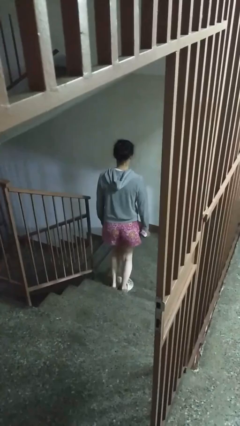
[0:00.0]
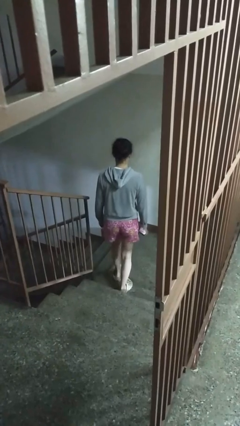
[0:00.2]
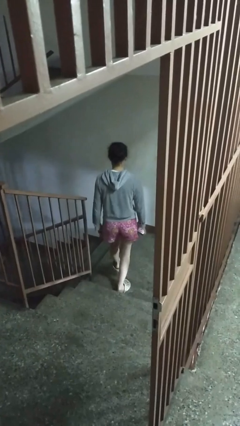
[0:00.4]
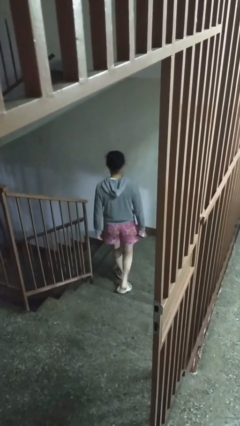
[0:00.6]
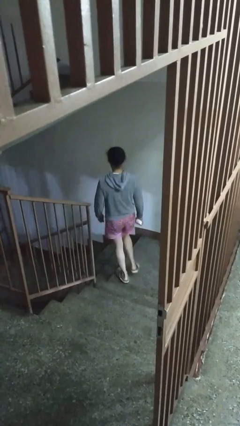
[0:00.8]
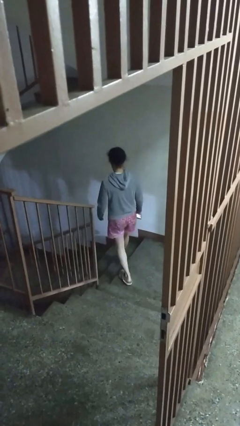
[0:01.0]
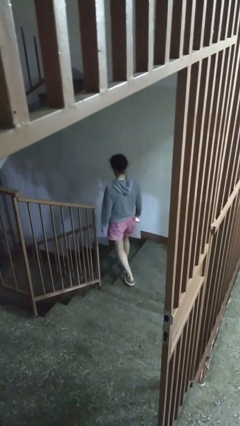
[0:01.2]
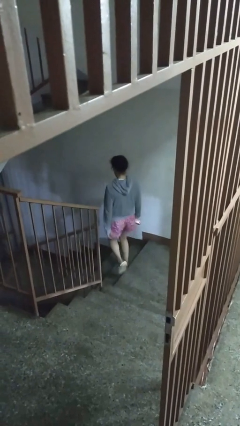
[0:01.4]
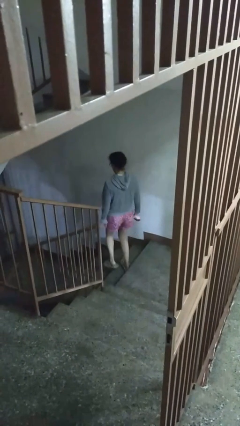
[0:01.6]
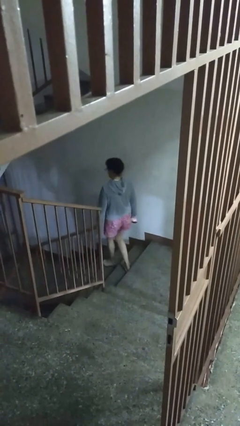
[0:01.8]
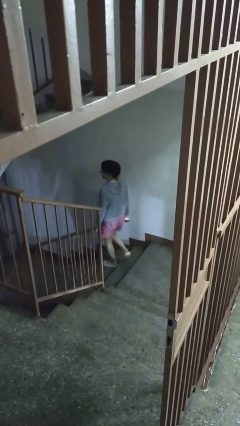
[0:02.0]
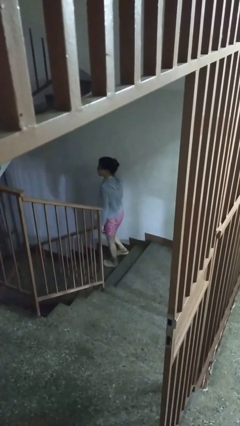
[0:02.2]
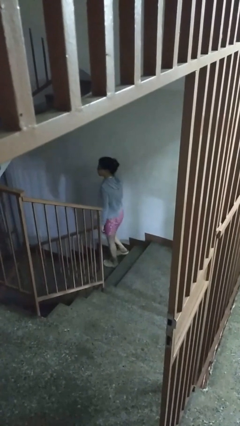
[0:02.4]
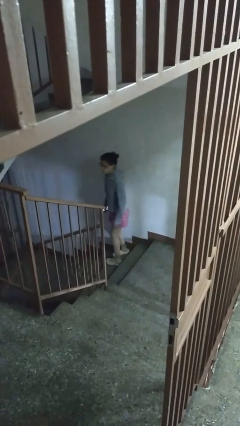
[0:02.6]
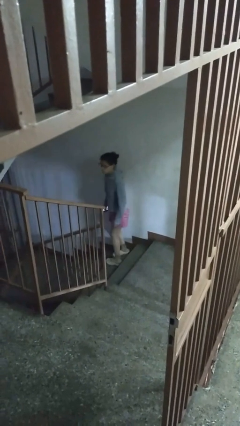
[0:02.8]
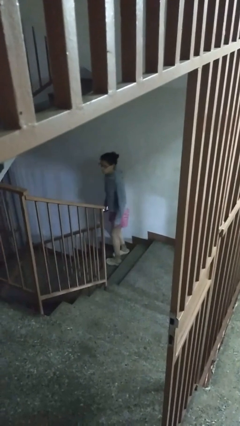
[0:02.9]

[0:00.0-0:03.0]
person climbs down stairs

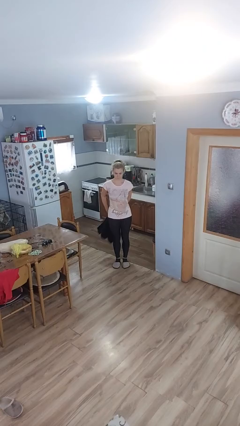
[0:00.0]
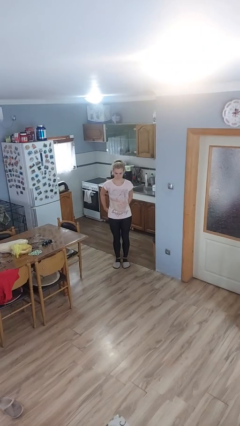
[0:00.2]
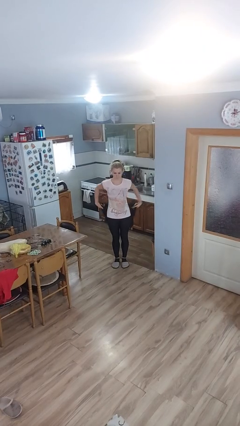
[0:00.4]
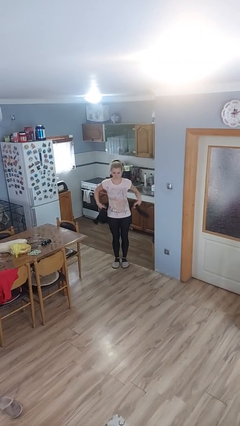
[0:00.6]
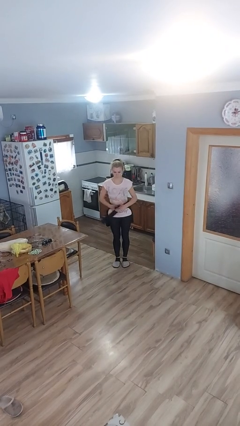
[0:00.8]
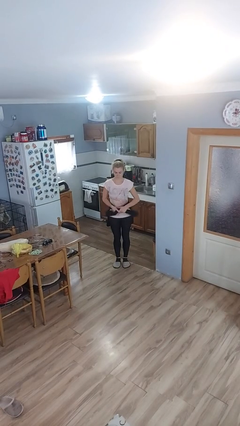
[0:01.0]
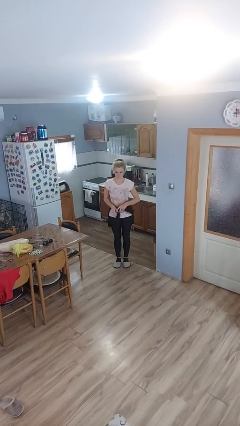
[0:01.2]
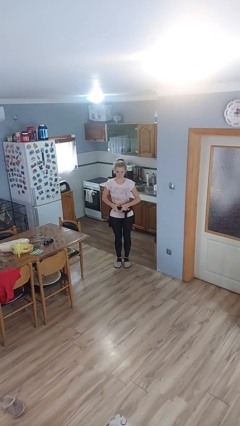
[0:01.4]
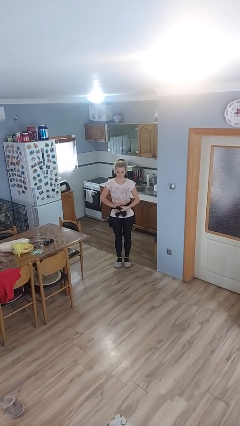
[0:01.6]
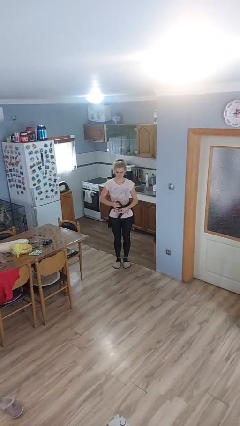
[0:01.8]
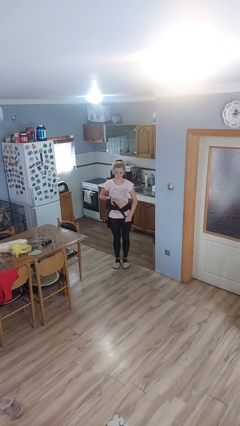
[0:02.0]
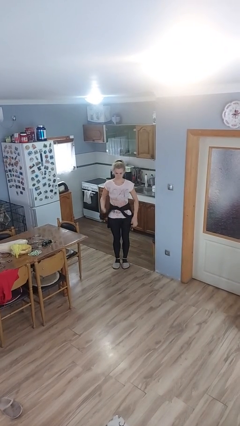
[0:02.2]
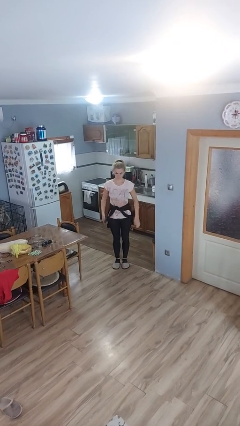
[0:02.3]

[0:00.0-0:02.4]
person ties jacket around waist

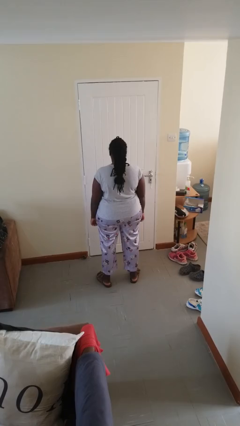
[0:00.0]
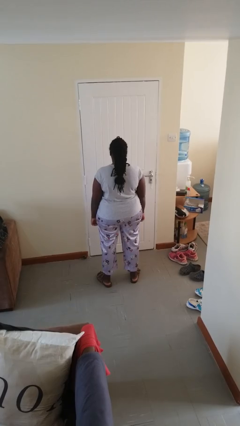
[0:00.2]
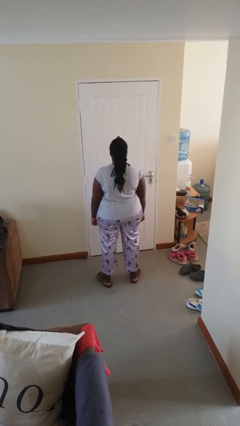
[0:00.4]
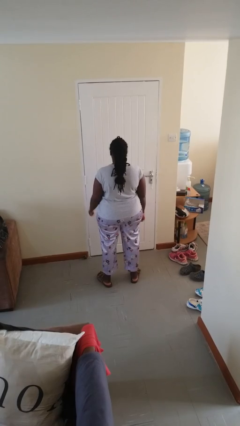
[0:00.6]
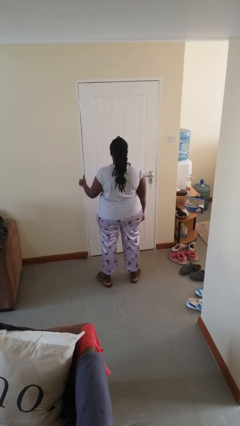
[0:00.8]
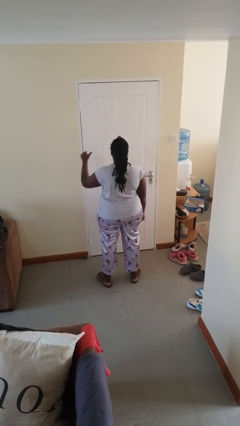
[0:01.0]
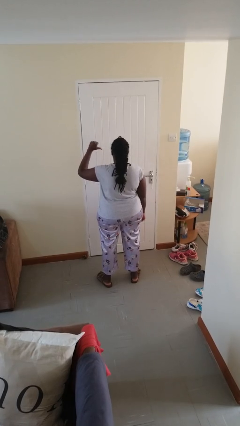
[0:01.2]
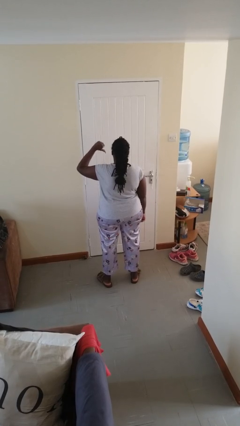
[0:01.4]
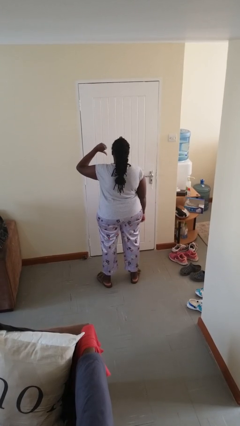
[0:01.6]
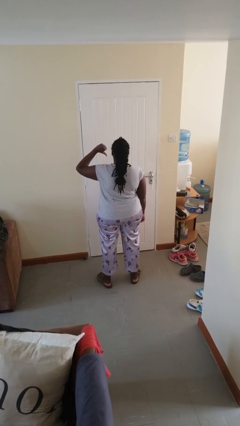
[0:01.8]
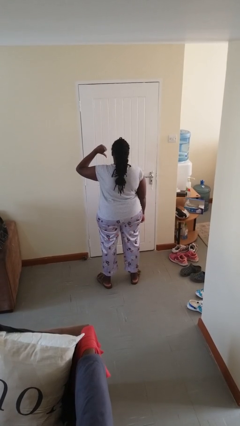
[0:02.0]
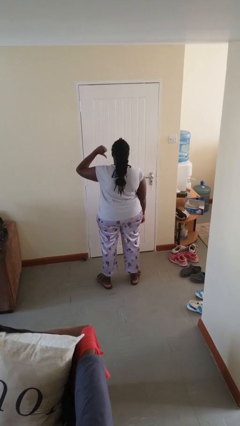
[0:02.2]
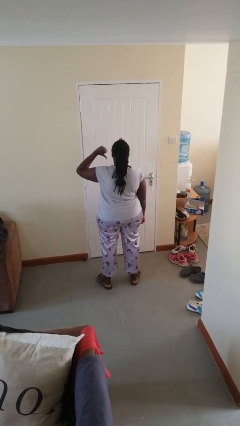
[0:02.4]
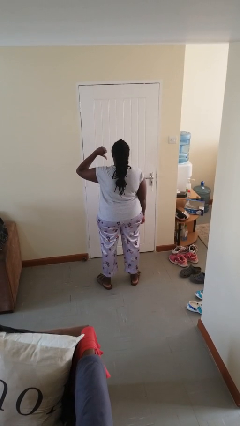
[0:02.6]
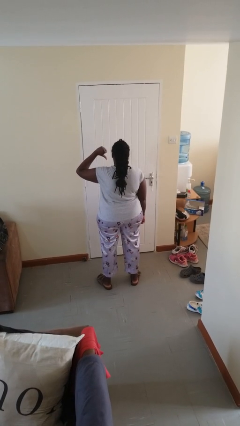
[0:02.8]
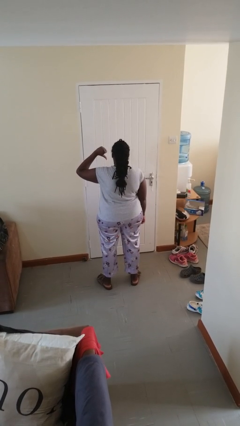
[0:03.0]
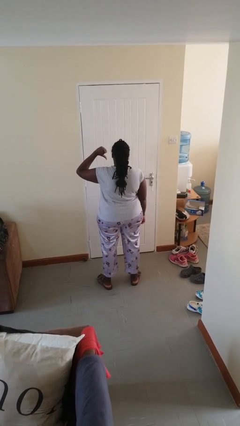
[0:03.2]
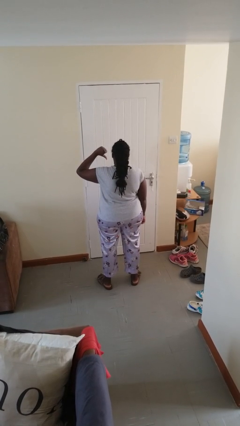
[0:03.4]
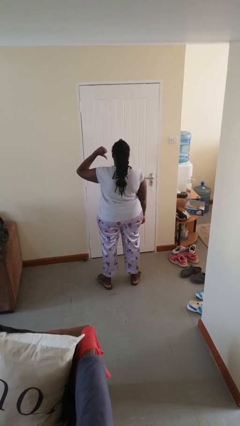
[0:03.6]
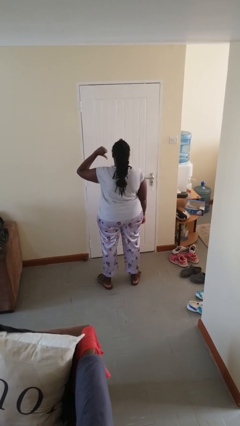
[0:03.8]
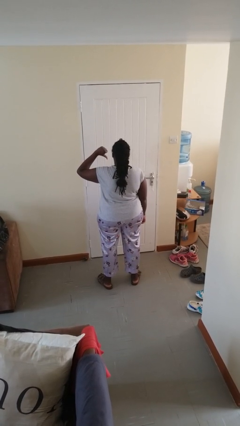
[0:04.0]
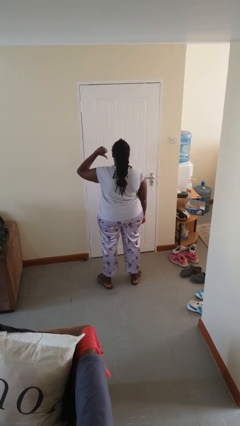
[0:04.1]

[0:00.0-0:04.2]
person gestures thumbs down

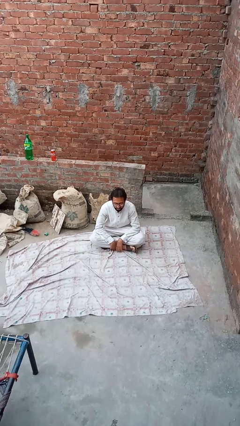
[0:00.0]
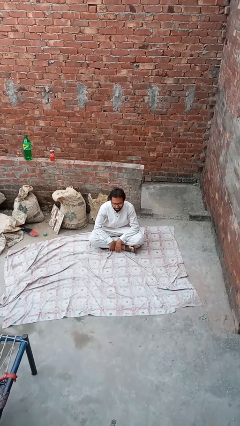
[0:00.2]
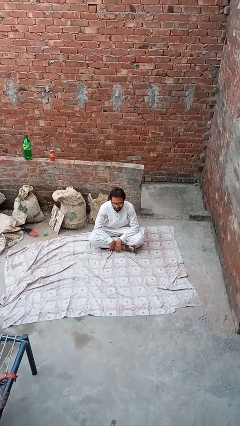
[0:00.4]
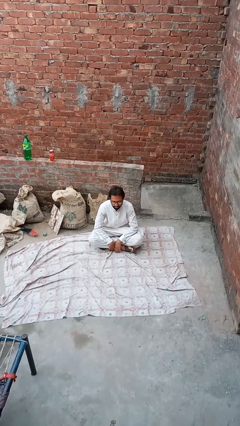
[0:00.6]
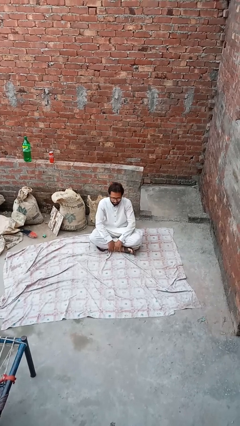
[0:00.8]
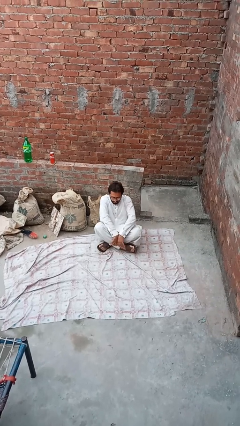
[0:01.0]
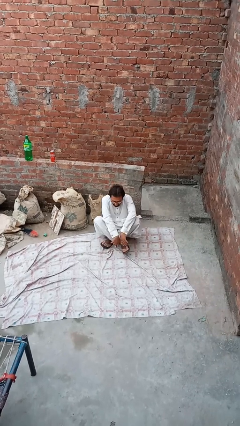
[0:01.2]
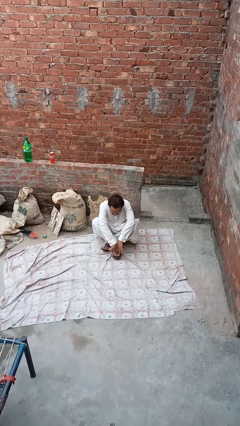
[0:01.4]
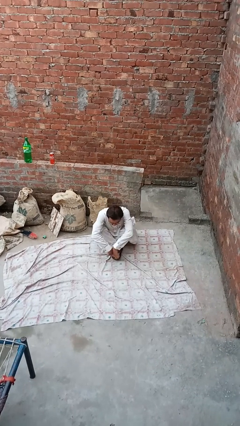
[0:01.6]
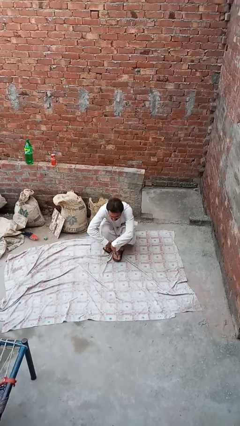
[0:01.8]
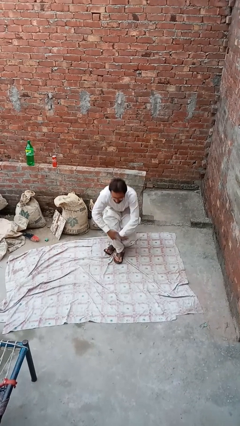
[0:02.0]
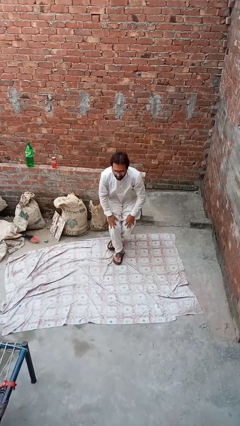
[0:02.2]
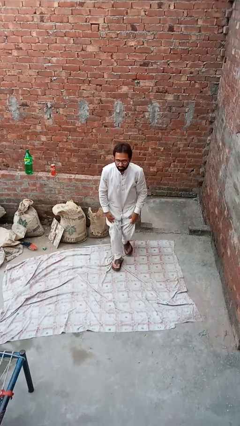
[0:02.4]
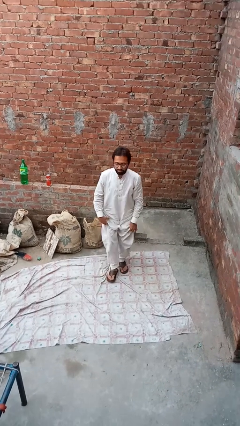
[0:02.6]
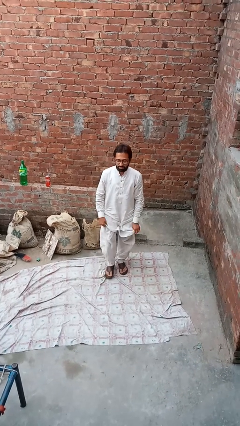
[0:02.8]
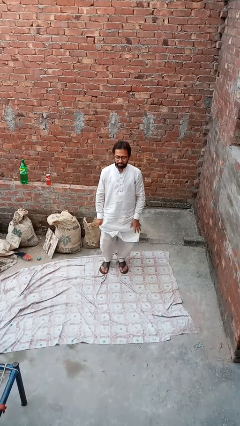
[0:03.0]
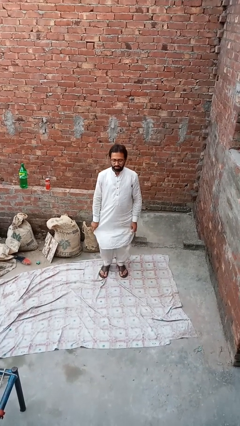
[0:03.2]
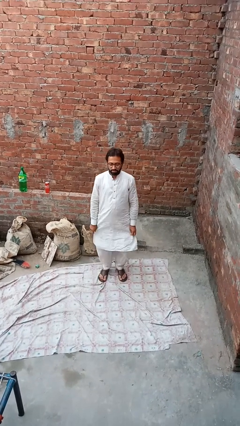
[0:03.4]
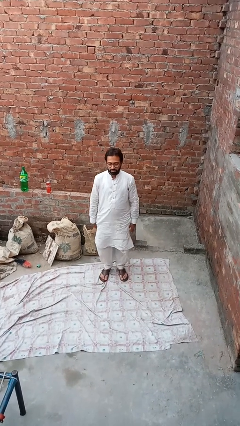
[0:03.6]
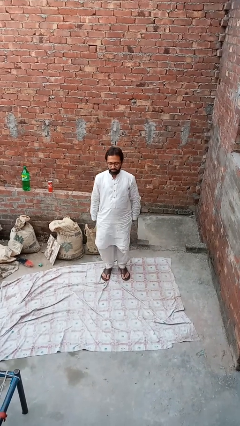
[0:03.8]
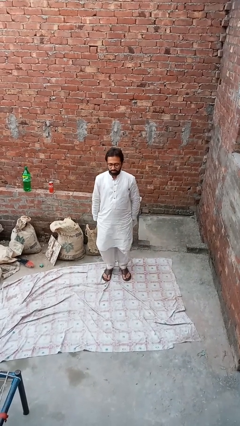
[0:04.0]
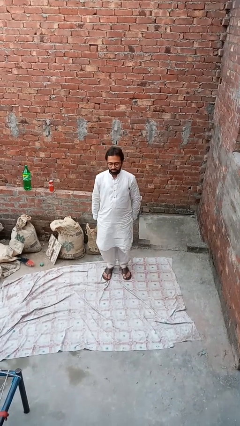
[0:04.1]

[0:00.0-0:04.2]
person stands up from floor

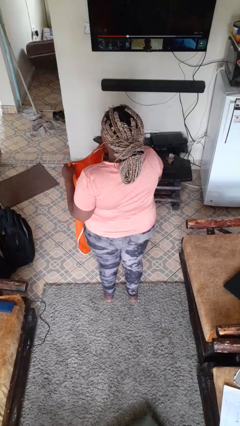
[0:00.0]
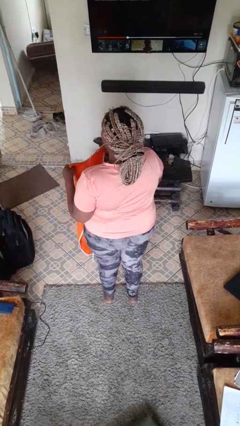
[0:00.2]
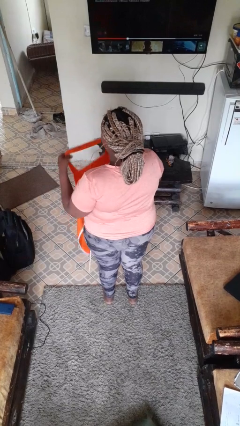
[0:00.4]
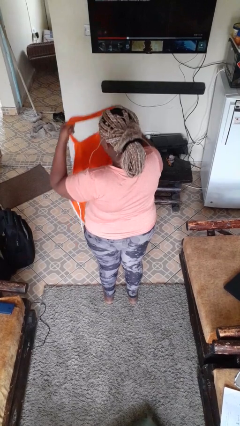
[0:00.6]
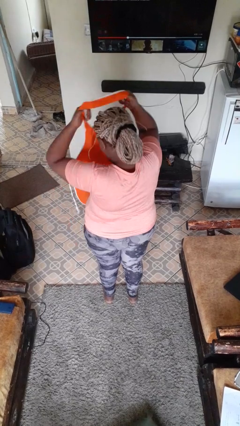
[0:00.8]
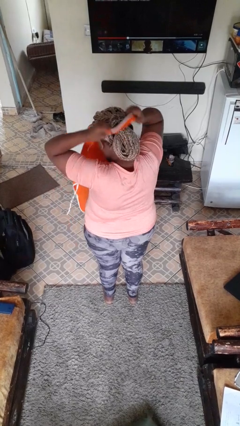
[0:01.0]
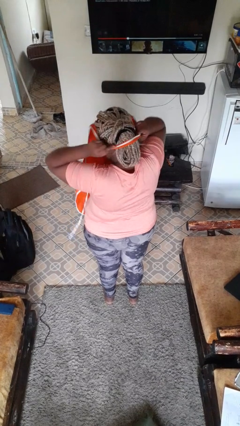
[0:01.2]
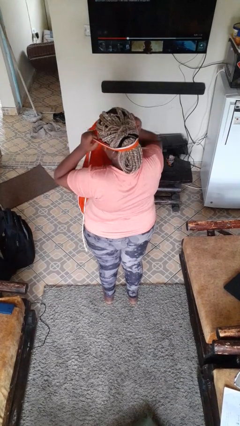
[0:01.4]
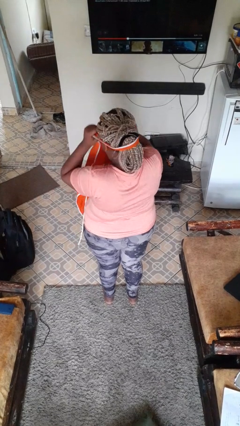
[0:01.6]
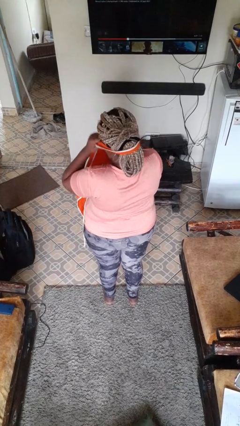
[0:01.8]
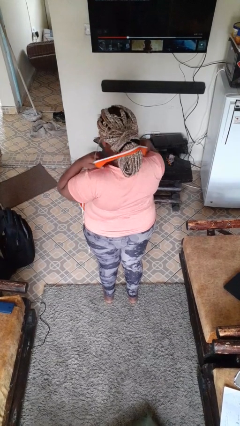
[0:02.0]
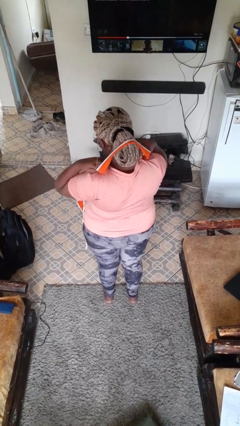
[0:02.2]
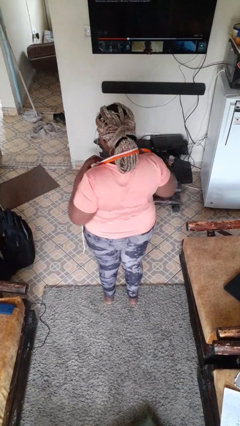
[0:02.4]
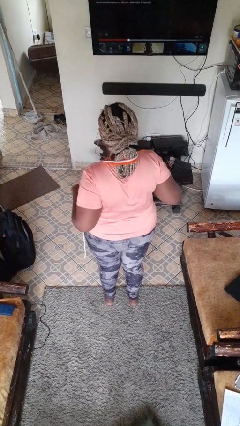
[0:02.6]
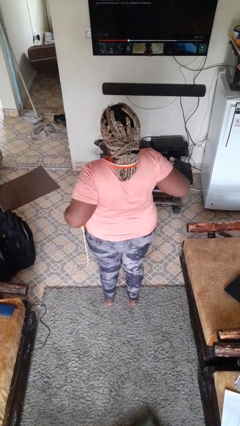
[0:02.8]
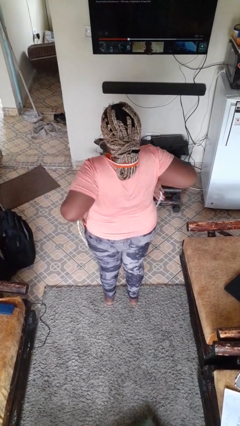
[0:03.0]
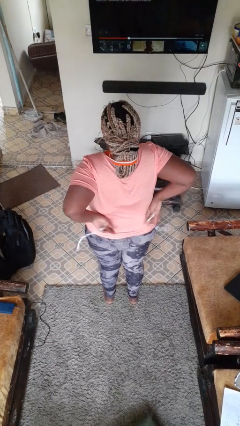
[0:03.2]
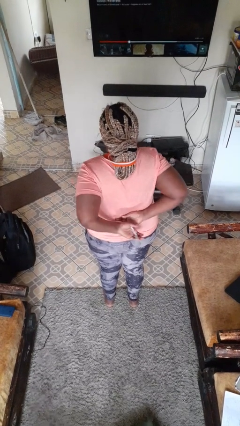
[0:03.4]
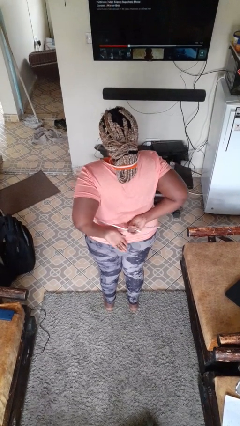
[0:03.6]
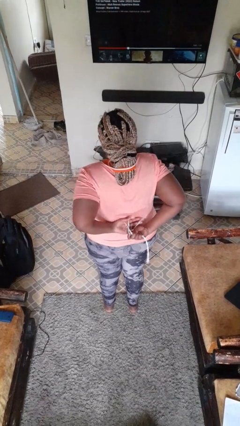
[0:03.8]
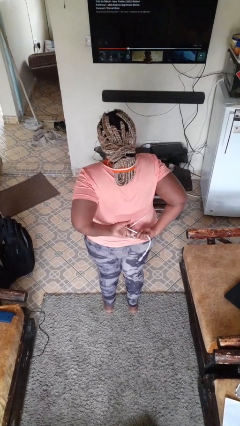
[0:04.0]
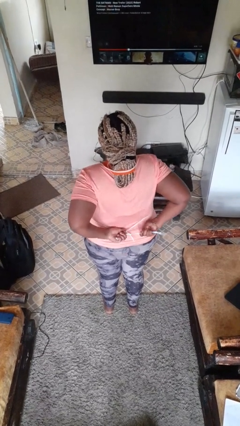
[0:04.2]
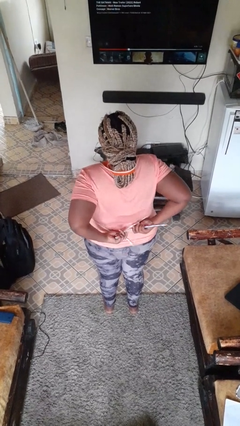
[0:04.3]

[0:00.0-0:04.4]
person puts on apron
